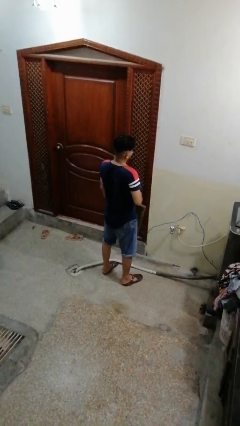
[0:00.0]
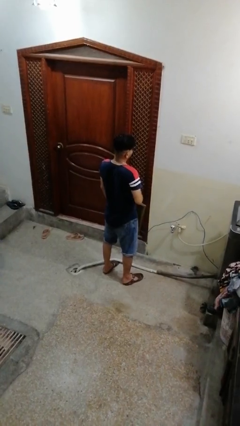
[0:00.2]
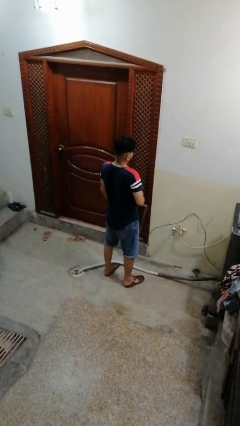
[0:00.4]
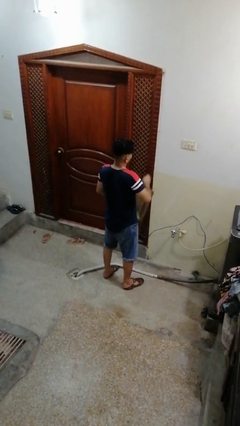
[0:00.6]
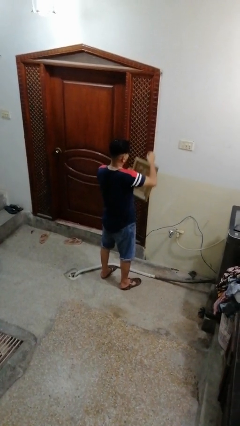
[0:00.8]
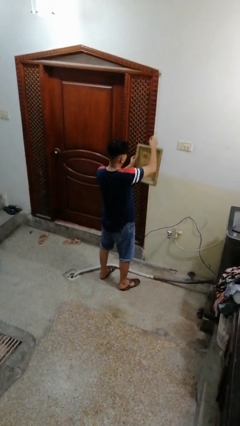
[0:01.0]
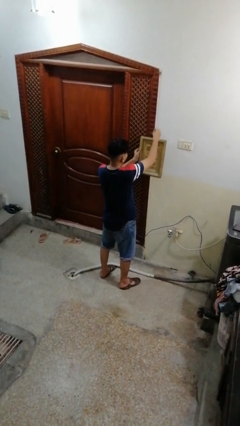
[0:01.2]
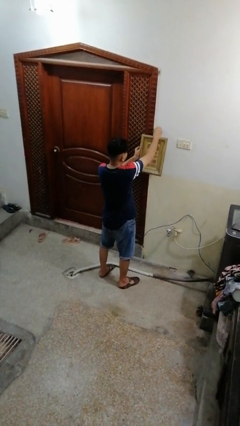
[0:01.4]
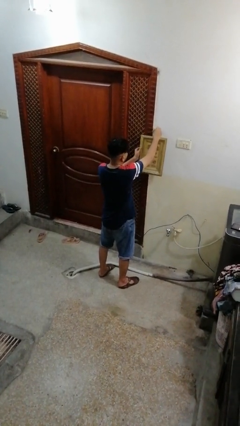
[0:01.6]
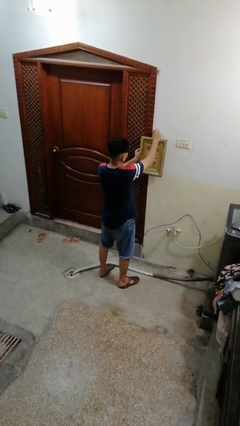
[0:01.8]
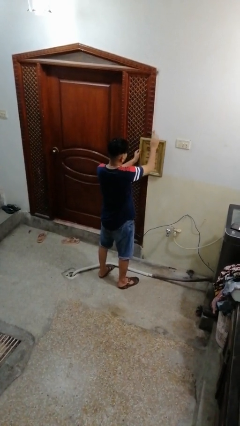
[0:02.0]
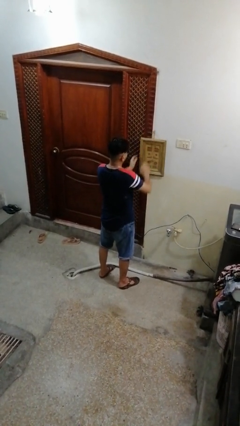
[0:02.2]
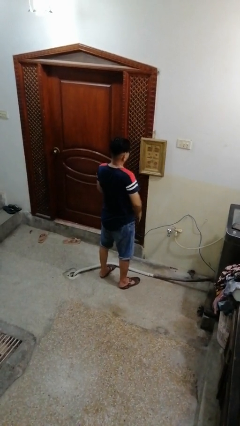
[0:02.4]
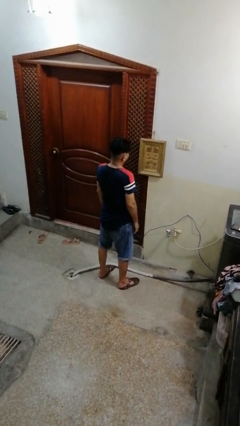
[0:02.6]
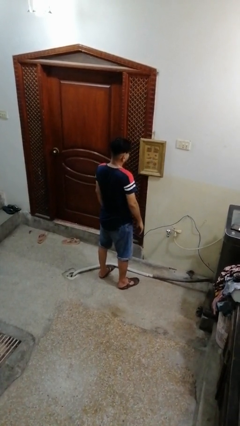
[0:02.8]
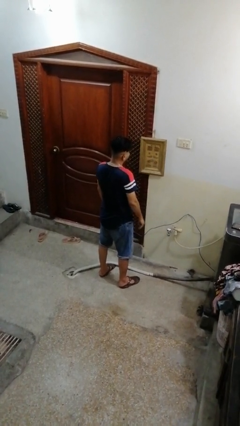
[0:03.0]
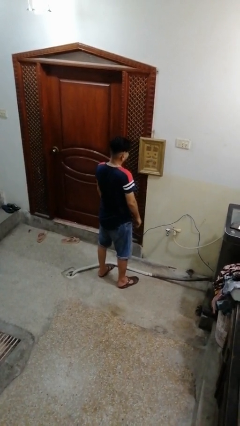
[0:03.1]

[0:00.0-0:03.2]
person puts up picture frame

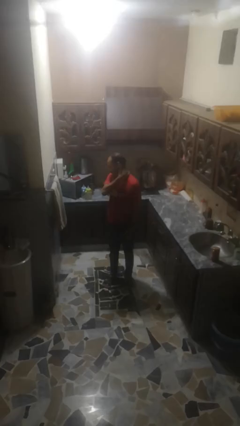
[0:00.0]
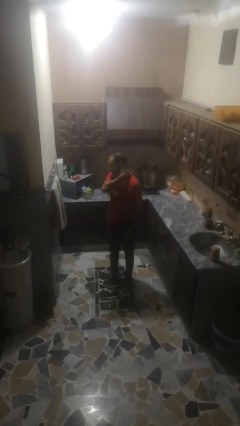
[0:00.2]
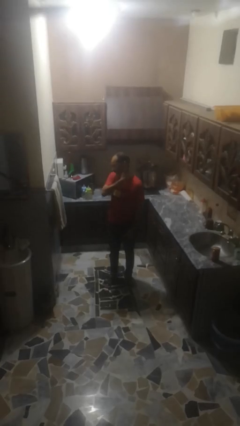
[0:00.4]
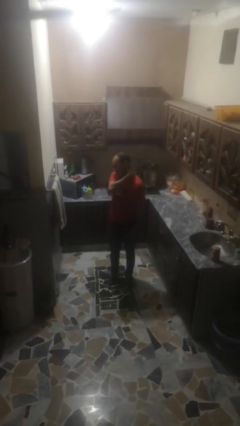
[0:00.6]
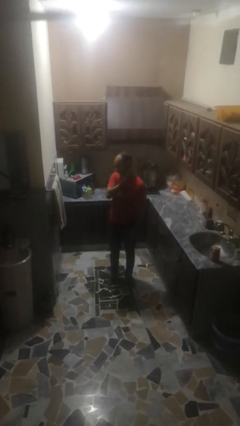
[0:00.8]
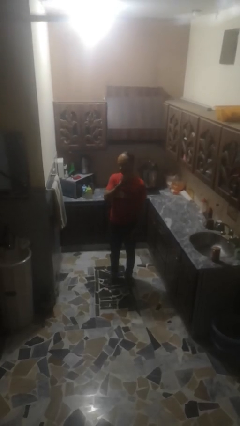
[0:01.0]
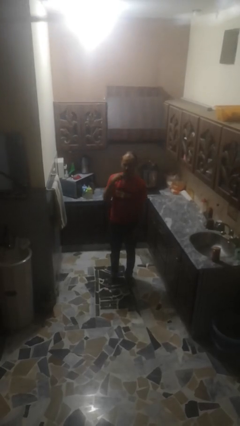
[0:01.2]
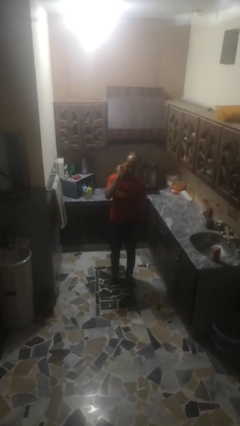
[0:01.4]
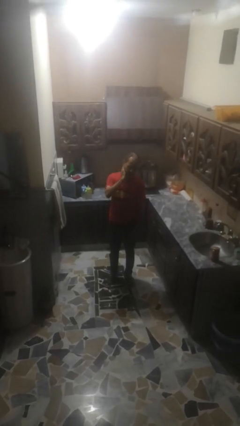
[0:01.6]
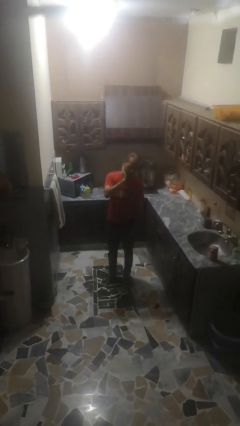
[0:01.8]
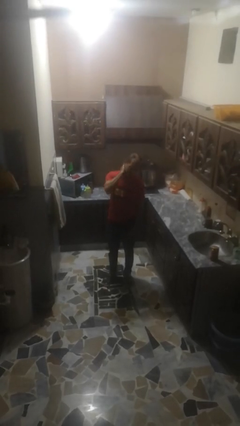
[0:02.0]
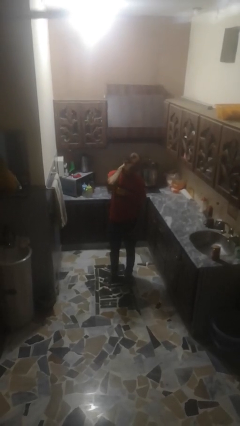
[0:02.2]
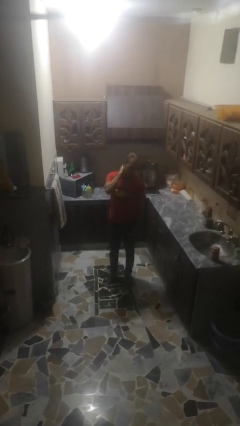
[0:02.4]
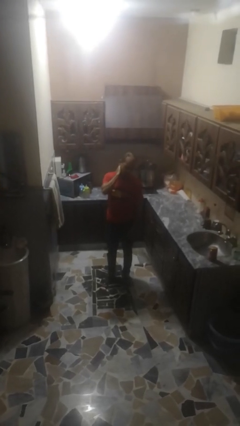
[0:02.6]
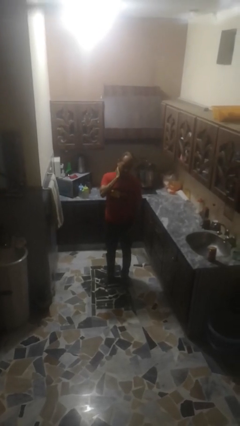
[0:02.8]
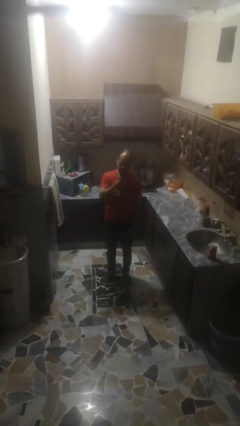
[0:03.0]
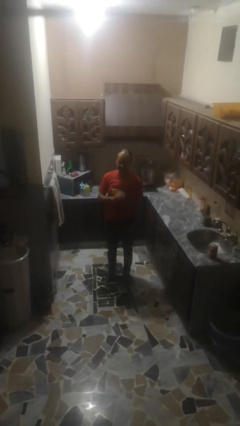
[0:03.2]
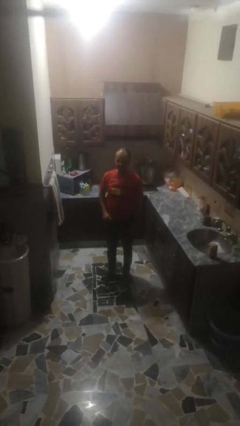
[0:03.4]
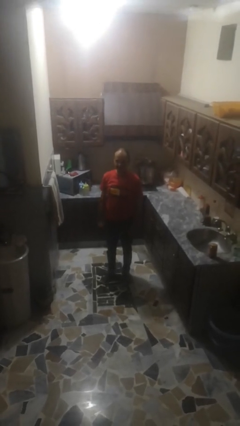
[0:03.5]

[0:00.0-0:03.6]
person rubs neck

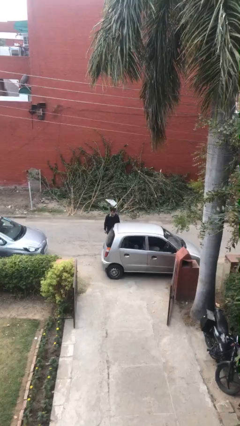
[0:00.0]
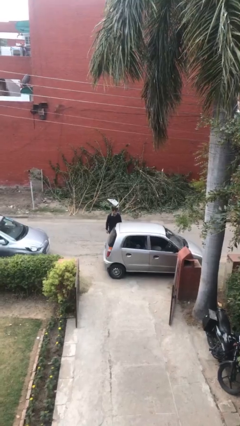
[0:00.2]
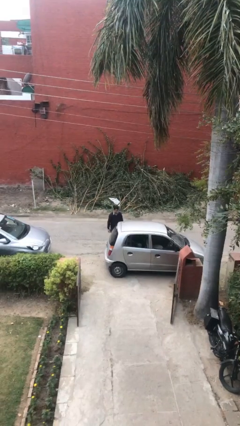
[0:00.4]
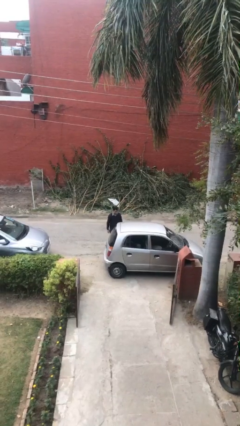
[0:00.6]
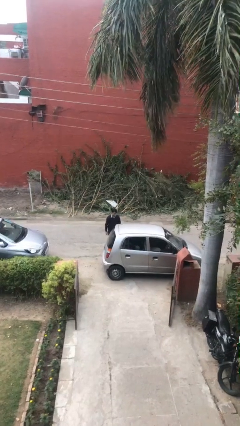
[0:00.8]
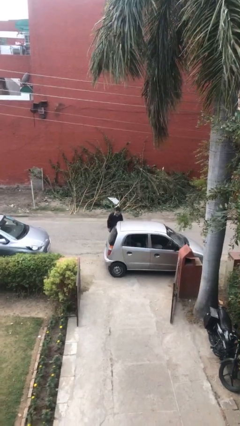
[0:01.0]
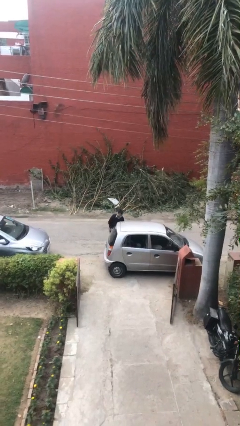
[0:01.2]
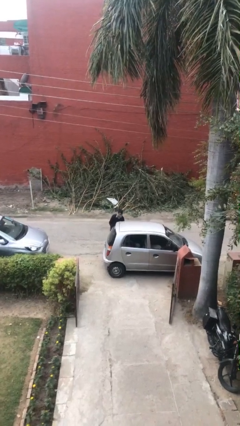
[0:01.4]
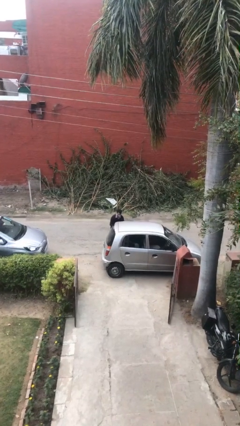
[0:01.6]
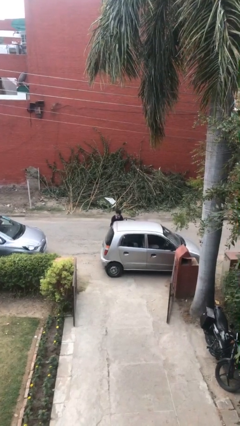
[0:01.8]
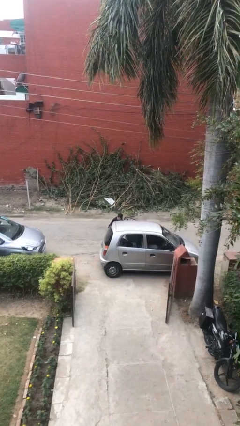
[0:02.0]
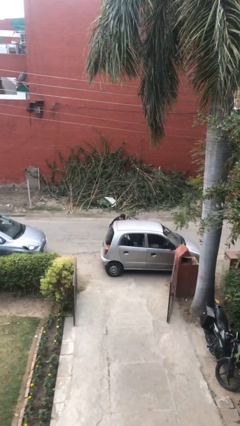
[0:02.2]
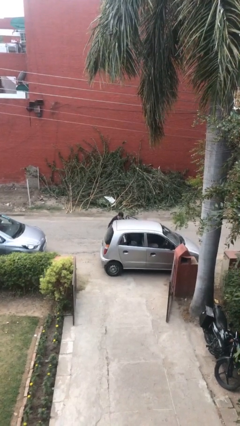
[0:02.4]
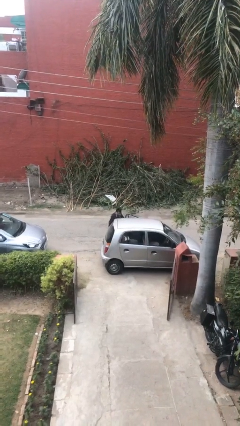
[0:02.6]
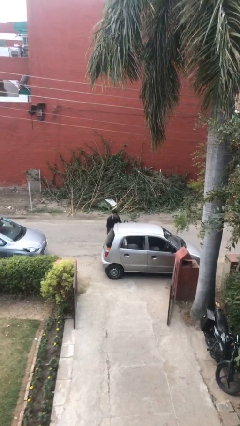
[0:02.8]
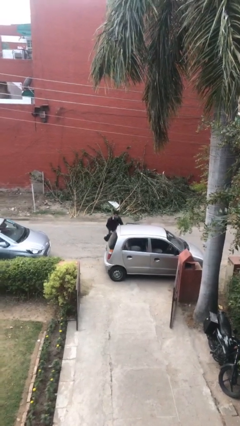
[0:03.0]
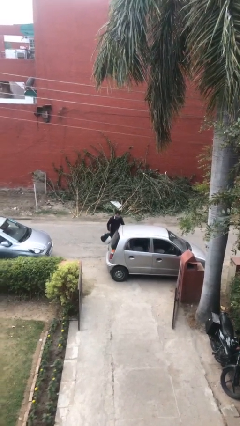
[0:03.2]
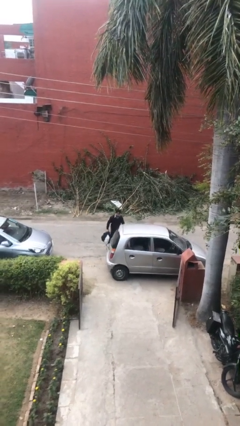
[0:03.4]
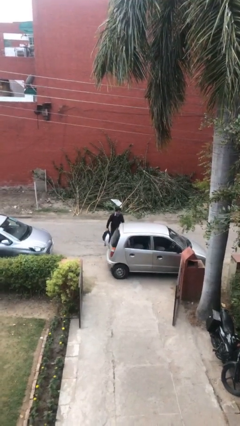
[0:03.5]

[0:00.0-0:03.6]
person unloads car

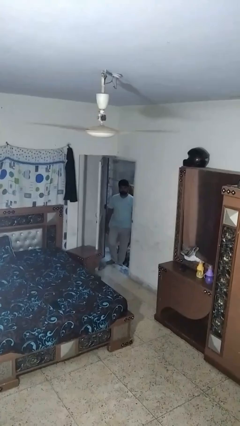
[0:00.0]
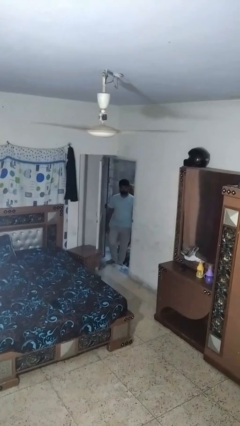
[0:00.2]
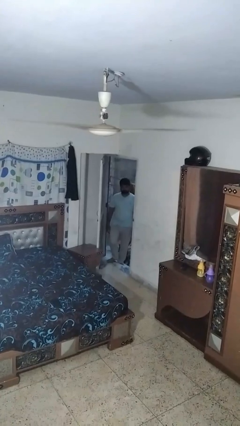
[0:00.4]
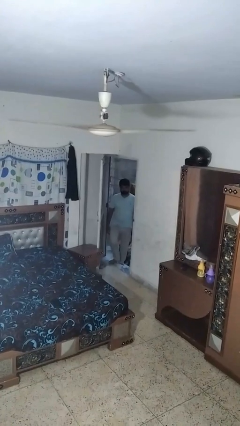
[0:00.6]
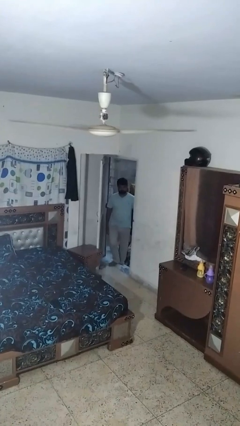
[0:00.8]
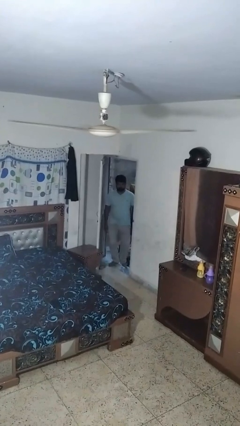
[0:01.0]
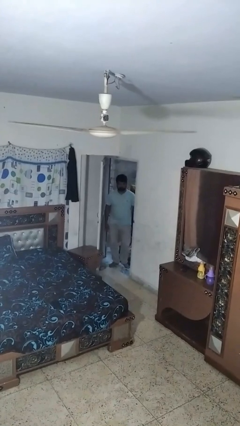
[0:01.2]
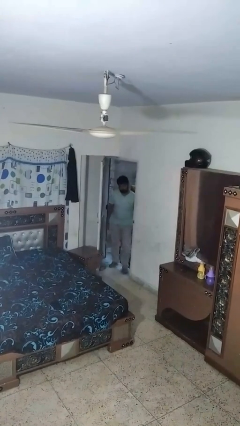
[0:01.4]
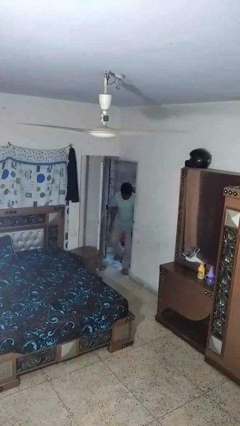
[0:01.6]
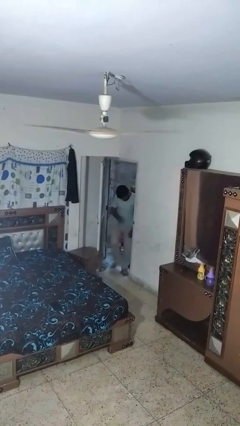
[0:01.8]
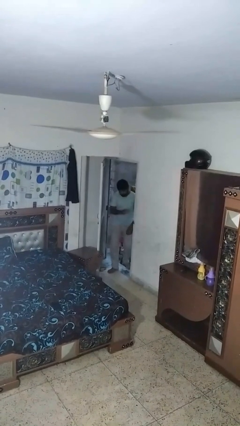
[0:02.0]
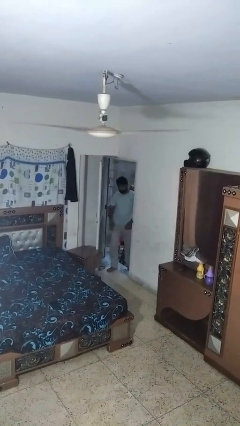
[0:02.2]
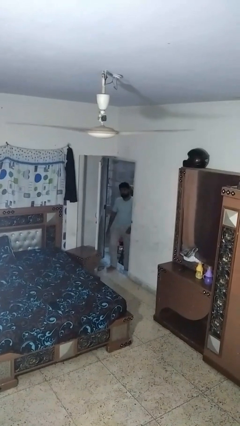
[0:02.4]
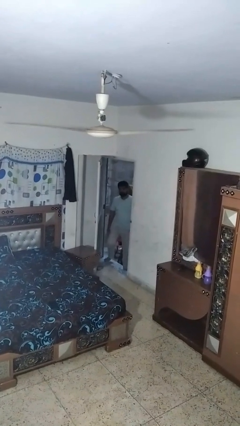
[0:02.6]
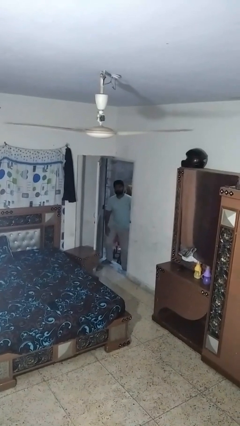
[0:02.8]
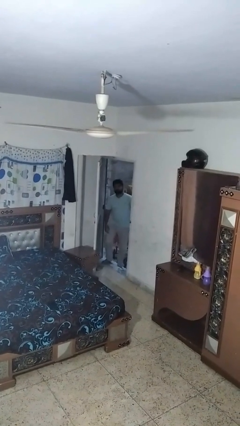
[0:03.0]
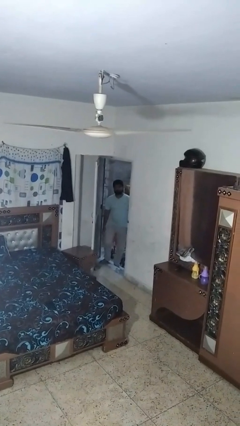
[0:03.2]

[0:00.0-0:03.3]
person bumps into wall

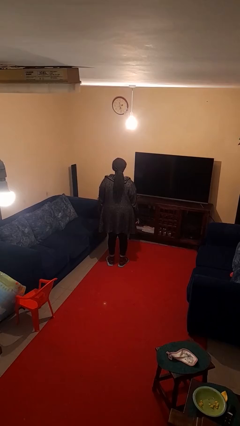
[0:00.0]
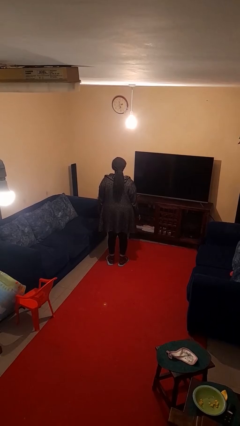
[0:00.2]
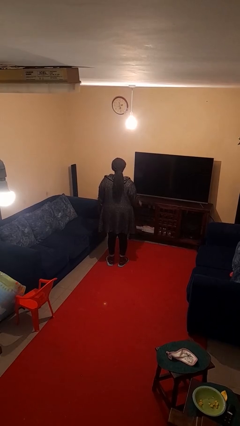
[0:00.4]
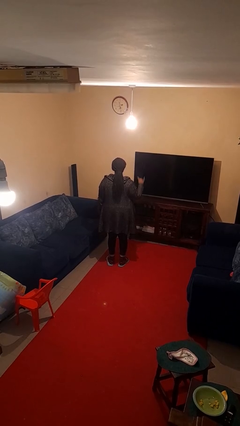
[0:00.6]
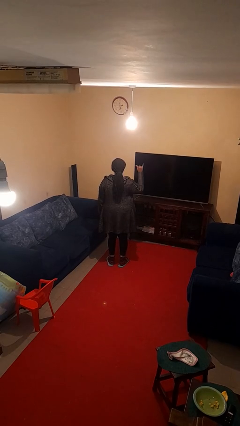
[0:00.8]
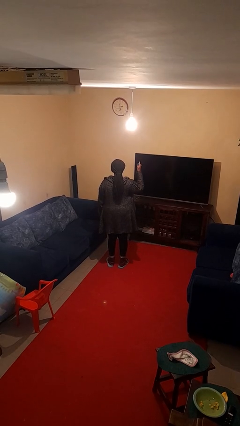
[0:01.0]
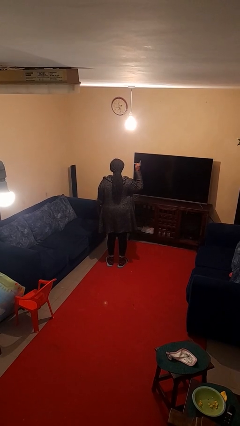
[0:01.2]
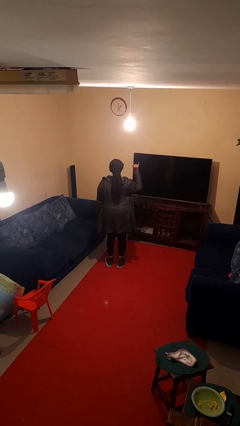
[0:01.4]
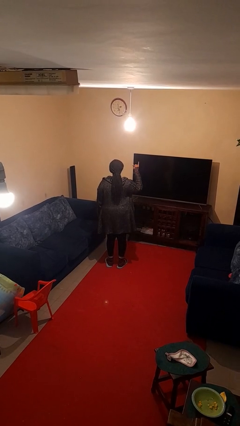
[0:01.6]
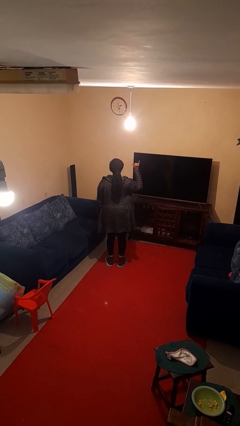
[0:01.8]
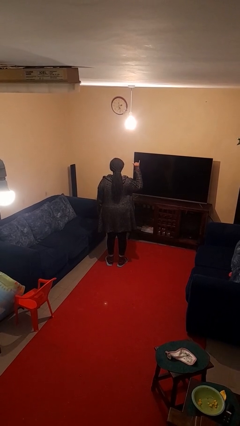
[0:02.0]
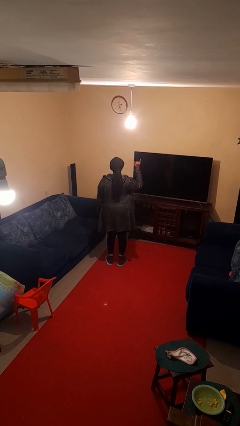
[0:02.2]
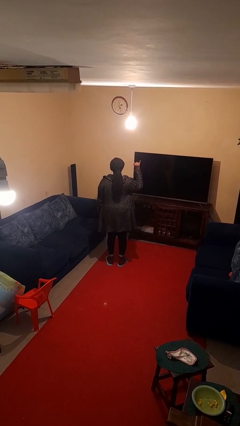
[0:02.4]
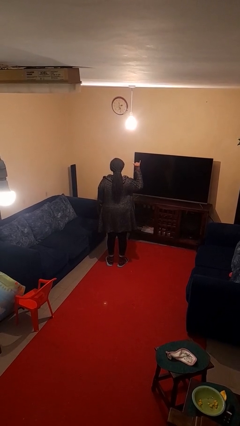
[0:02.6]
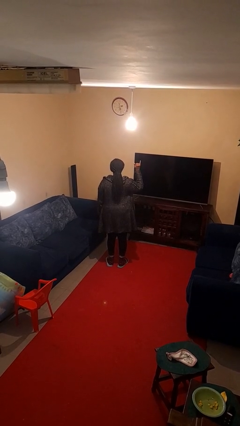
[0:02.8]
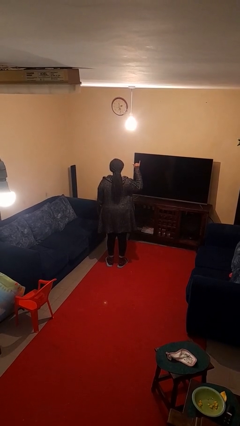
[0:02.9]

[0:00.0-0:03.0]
person gestures hang loose

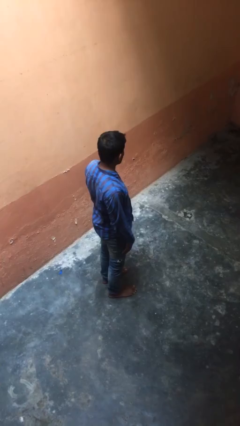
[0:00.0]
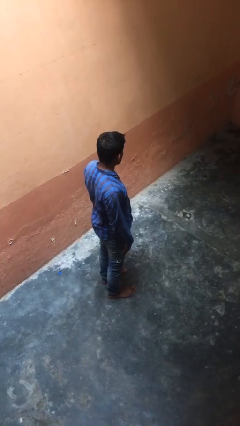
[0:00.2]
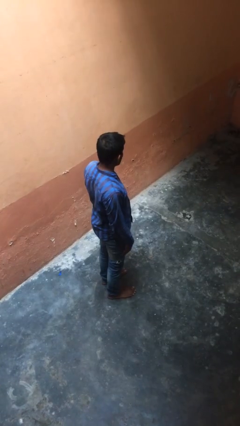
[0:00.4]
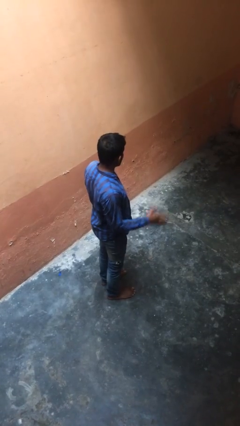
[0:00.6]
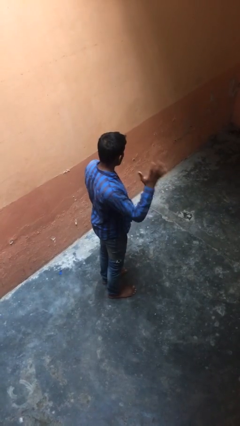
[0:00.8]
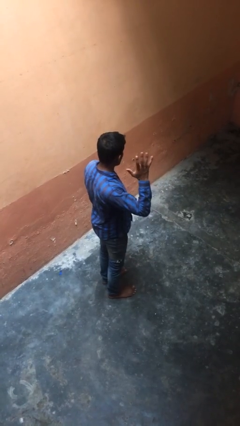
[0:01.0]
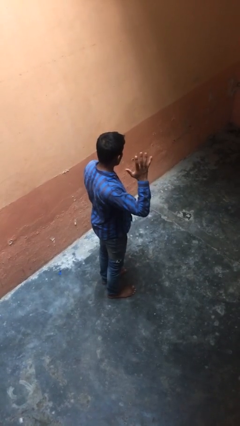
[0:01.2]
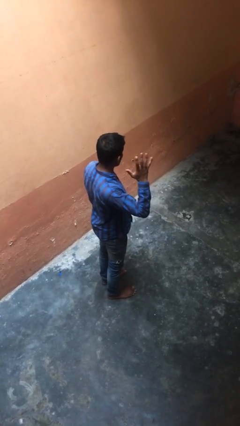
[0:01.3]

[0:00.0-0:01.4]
person gestures number five
